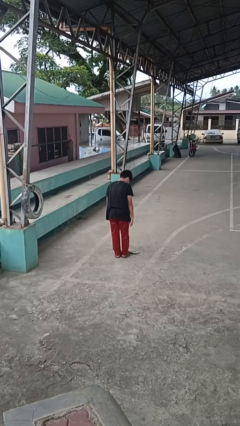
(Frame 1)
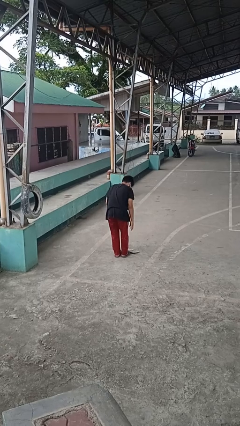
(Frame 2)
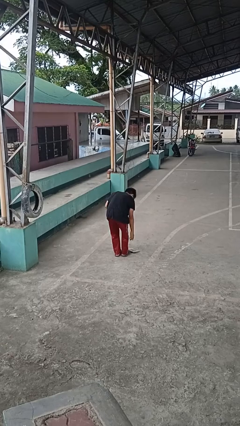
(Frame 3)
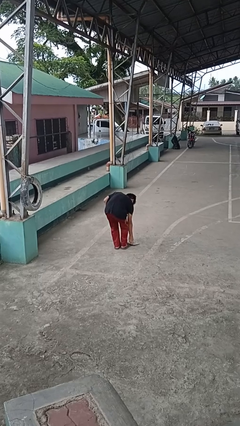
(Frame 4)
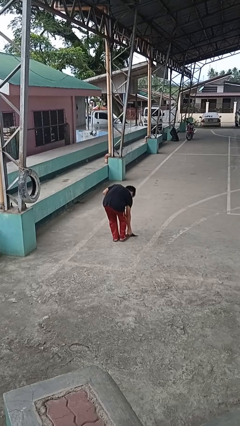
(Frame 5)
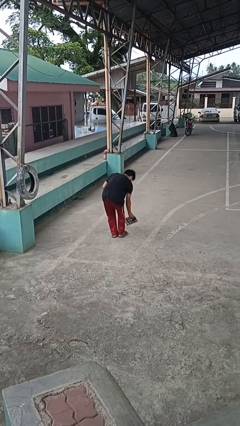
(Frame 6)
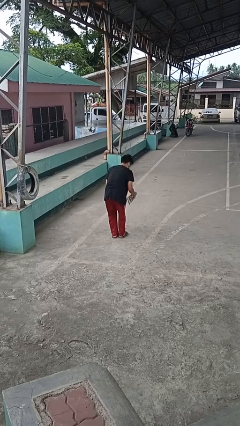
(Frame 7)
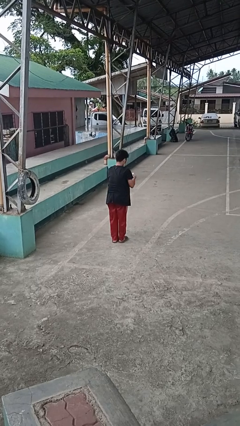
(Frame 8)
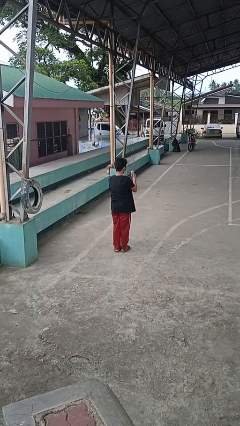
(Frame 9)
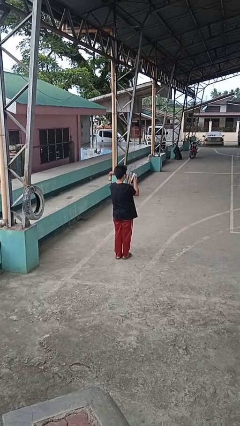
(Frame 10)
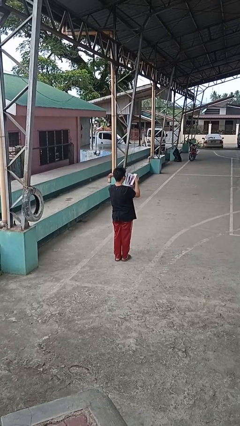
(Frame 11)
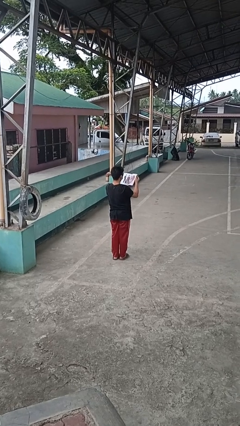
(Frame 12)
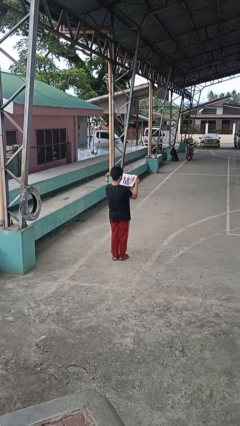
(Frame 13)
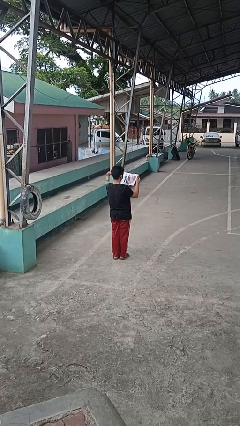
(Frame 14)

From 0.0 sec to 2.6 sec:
person picks up object from floor

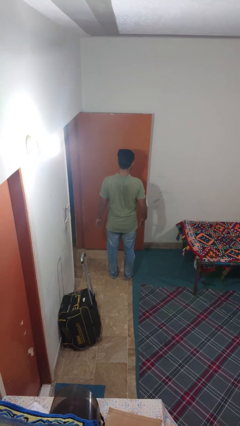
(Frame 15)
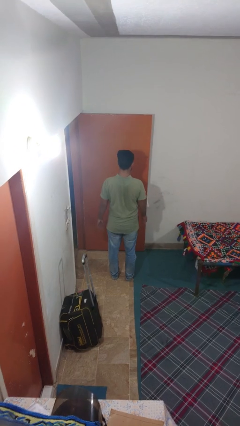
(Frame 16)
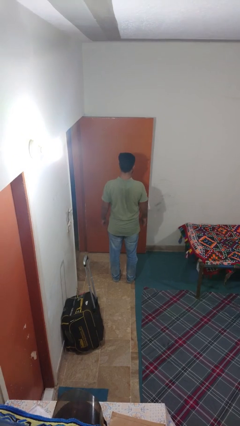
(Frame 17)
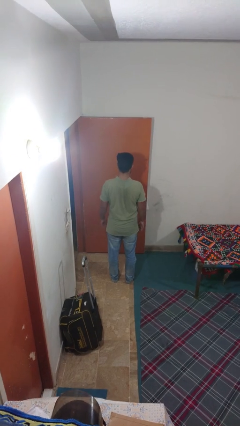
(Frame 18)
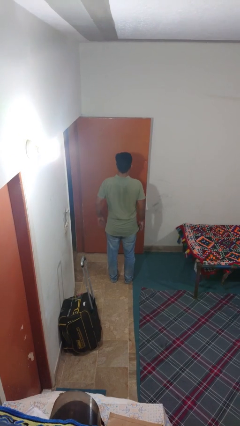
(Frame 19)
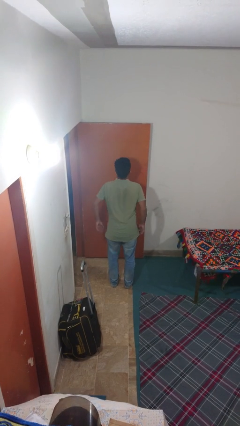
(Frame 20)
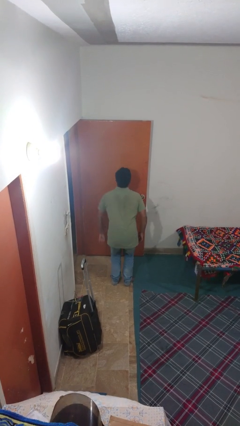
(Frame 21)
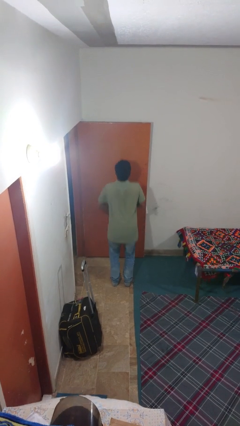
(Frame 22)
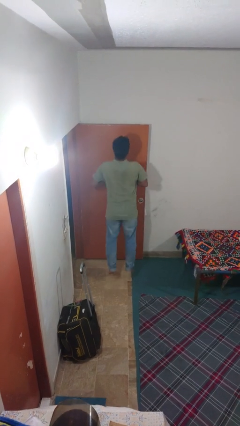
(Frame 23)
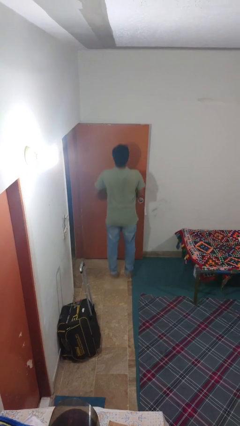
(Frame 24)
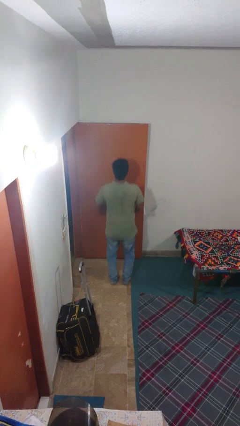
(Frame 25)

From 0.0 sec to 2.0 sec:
person jumps

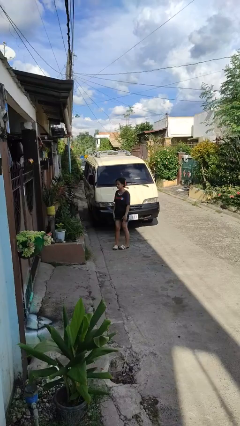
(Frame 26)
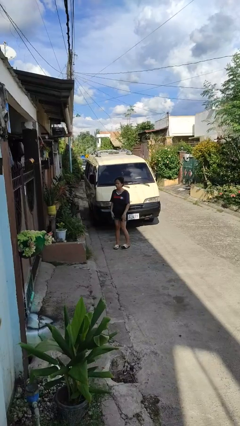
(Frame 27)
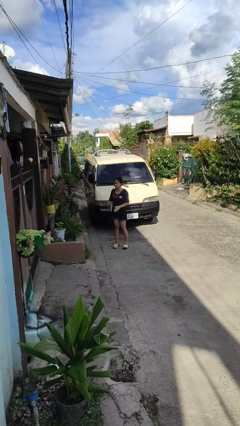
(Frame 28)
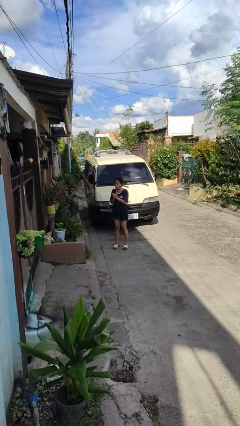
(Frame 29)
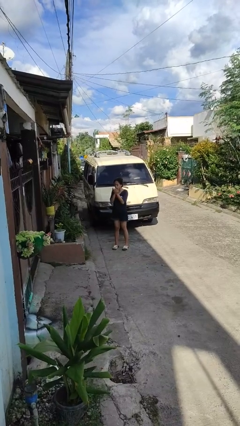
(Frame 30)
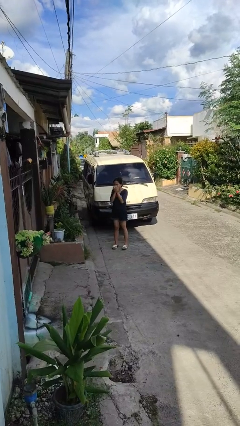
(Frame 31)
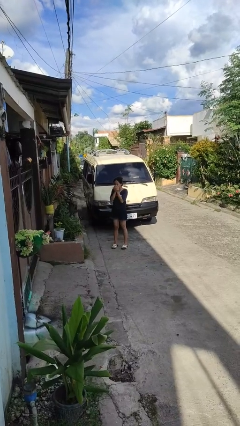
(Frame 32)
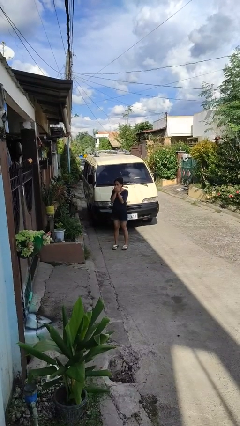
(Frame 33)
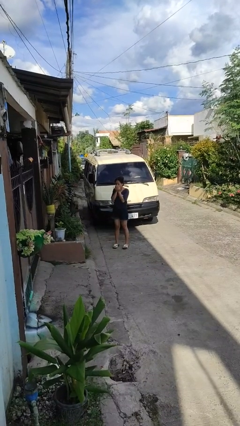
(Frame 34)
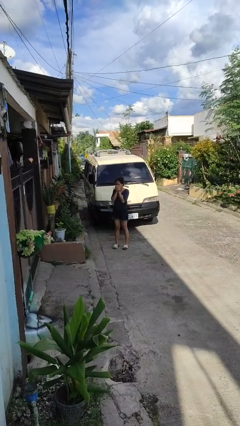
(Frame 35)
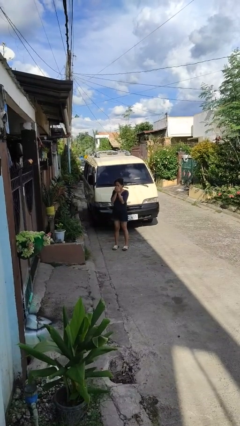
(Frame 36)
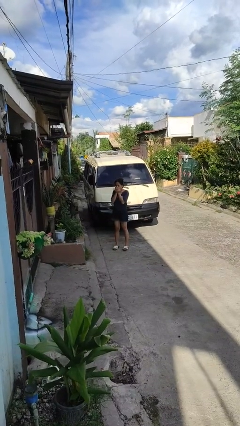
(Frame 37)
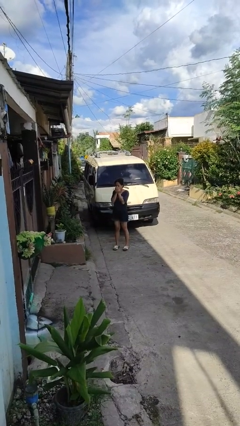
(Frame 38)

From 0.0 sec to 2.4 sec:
person blows into hands

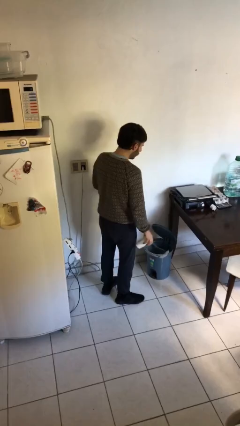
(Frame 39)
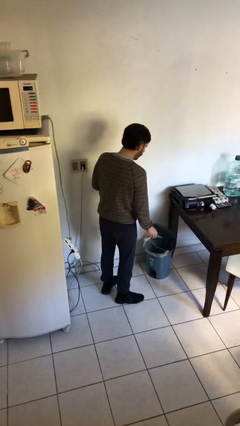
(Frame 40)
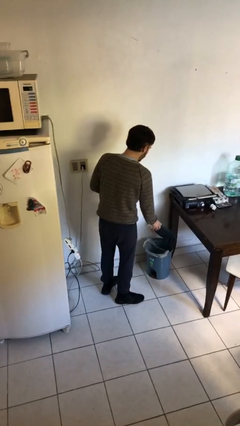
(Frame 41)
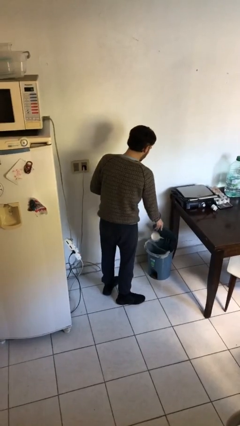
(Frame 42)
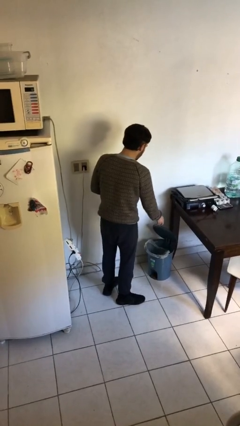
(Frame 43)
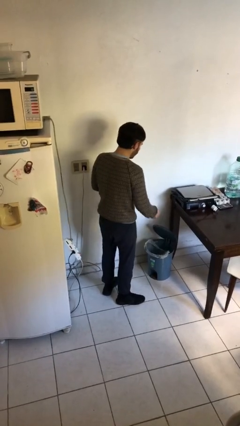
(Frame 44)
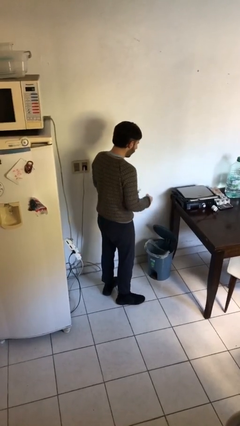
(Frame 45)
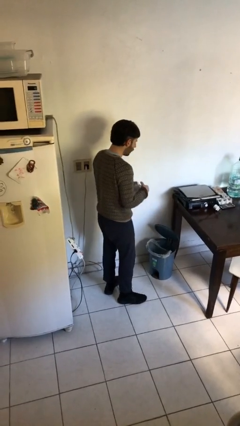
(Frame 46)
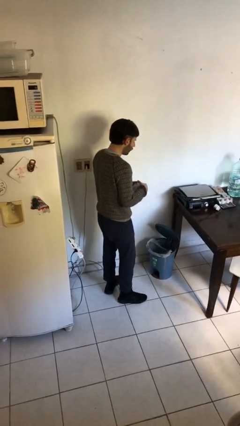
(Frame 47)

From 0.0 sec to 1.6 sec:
person discards trash

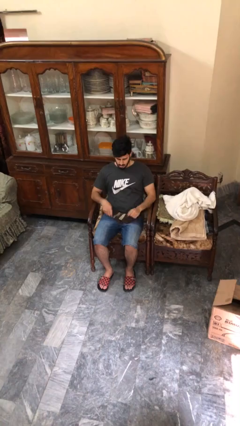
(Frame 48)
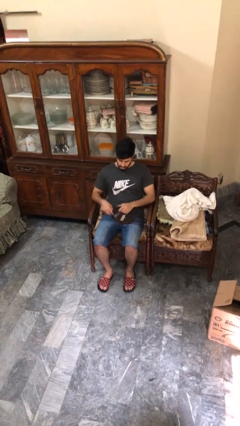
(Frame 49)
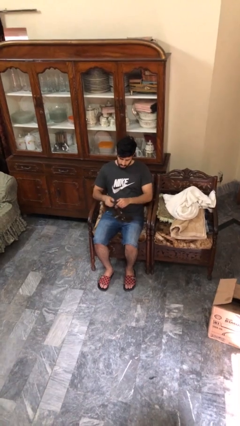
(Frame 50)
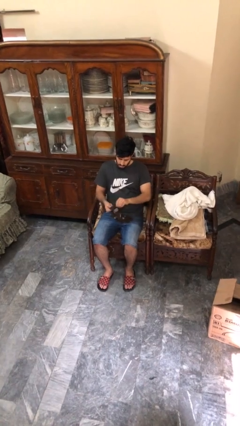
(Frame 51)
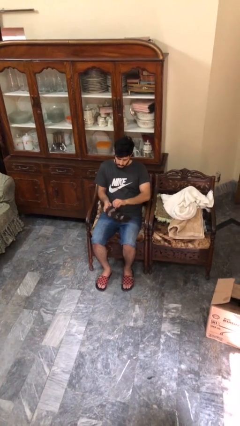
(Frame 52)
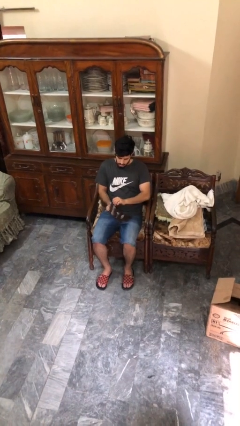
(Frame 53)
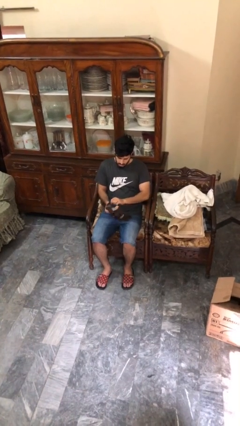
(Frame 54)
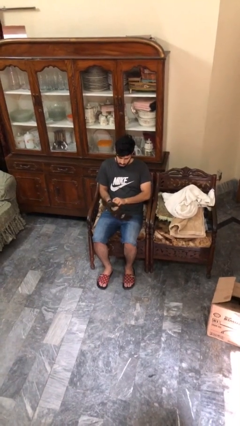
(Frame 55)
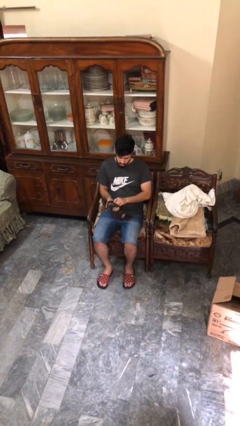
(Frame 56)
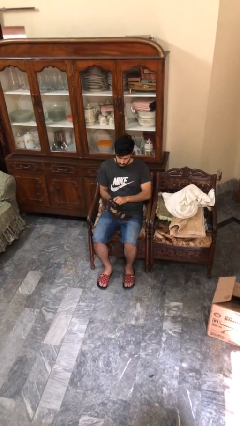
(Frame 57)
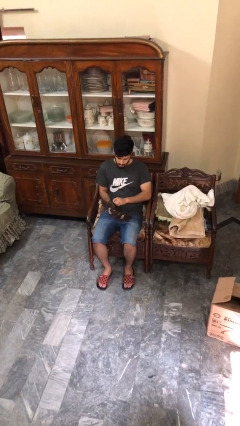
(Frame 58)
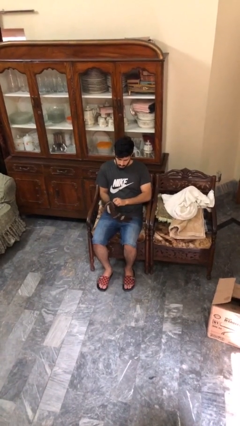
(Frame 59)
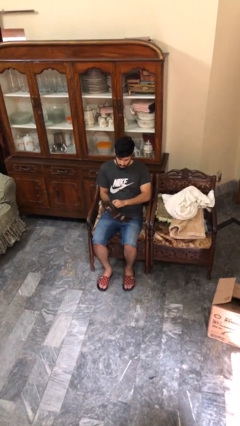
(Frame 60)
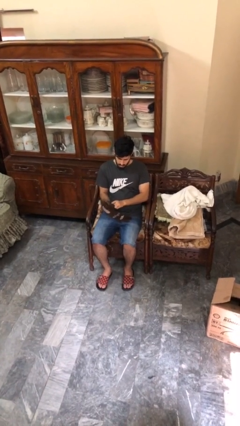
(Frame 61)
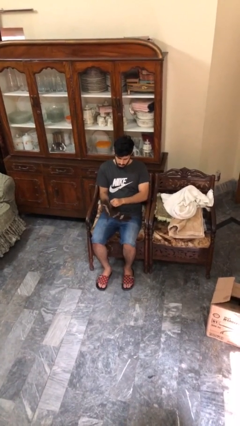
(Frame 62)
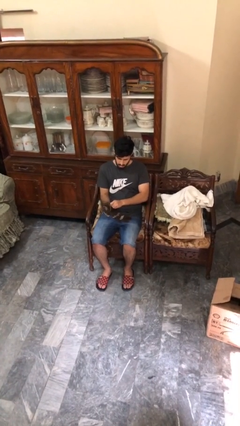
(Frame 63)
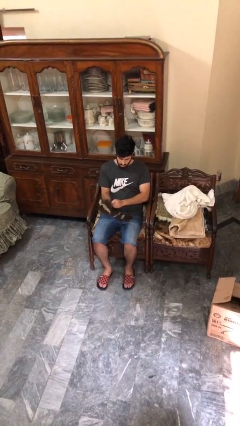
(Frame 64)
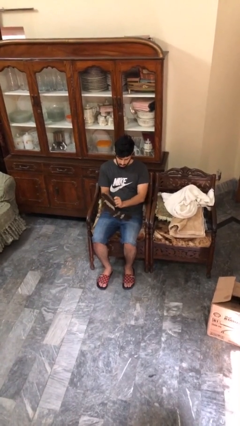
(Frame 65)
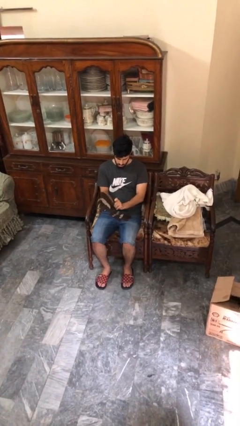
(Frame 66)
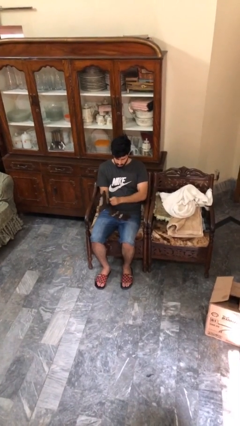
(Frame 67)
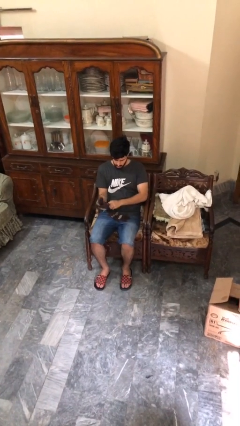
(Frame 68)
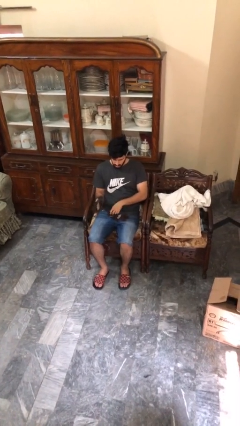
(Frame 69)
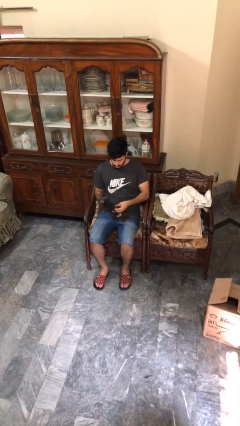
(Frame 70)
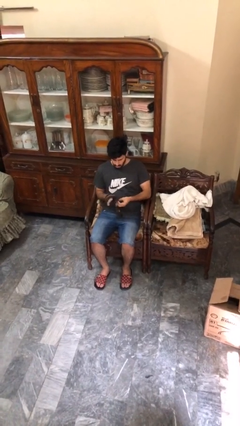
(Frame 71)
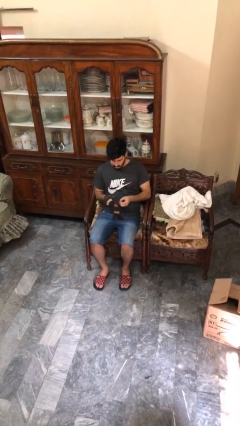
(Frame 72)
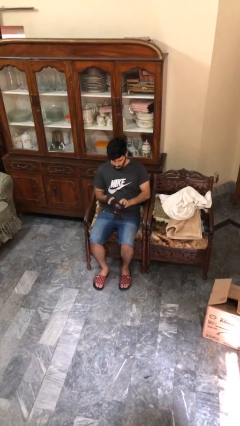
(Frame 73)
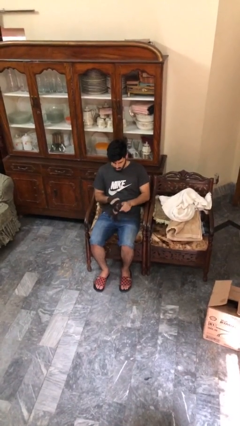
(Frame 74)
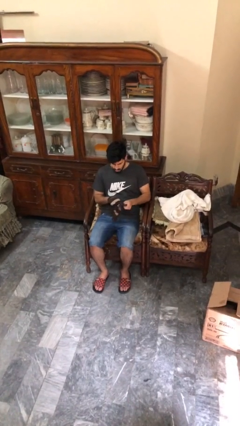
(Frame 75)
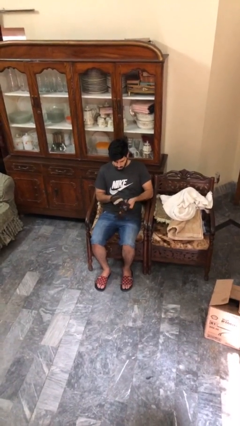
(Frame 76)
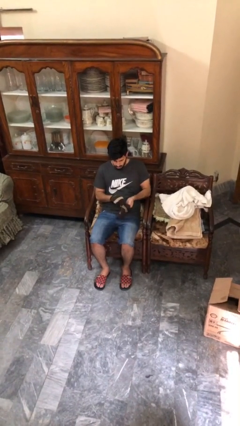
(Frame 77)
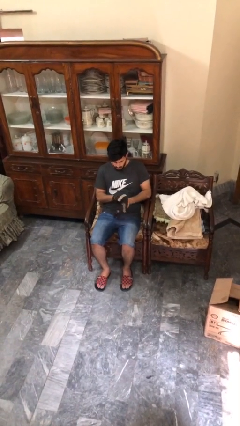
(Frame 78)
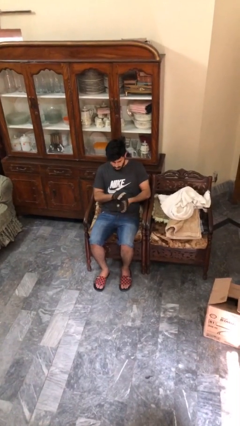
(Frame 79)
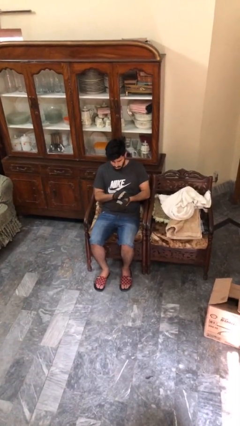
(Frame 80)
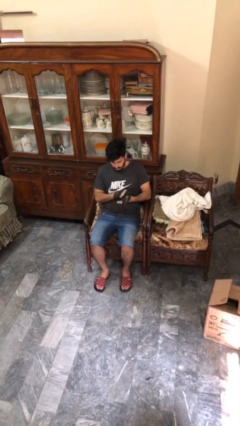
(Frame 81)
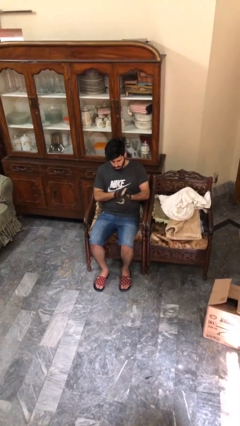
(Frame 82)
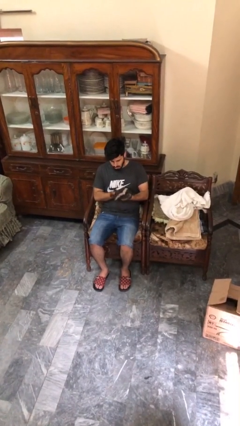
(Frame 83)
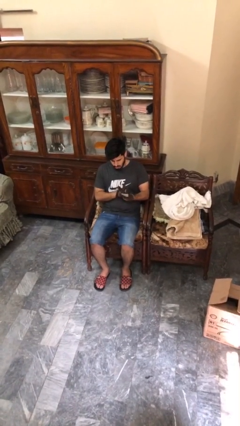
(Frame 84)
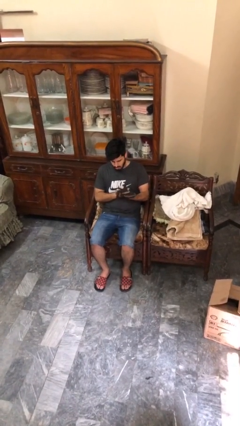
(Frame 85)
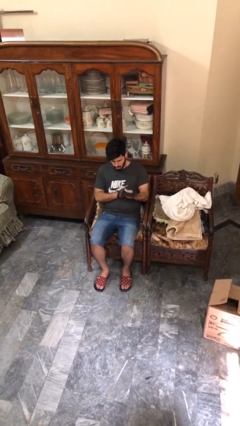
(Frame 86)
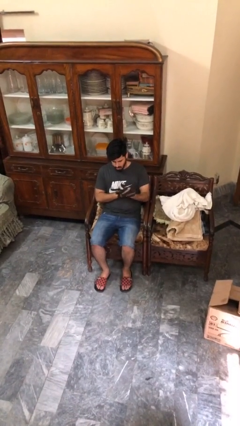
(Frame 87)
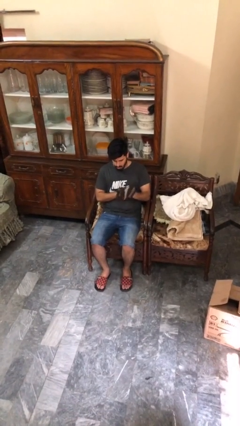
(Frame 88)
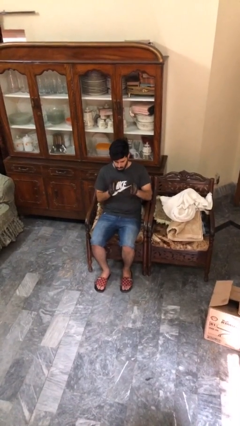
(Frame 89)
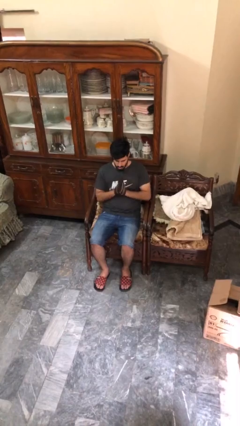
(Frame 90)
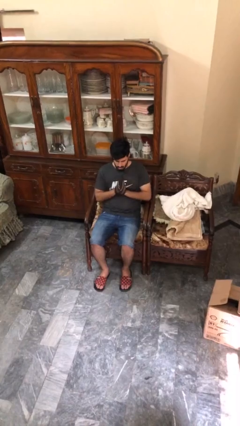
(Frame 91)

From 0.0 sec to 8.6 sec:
person puts on gloves

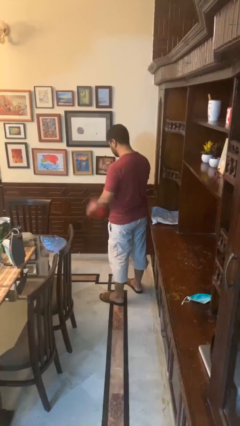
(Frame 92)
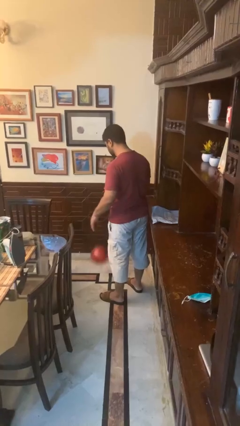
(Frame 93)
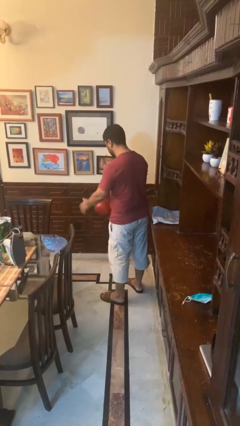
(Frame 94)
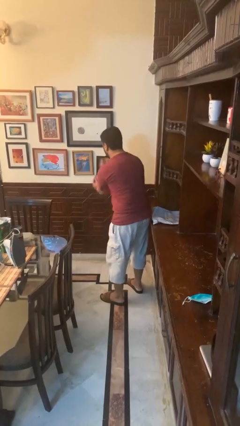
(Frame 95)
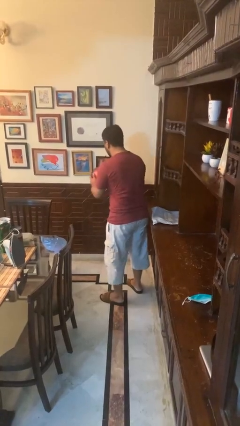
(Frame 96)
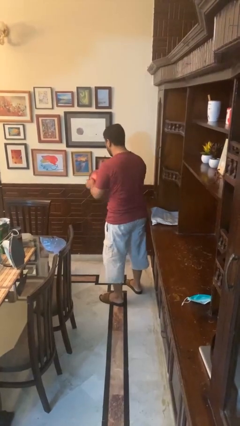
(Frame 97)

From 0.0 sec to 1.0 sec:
person bounces ball on floor
